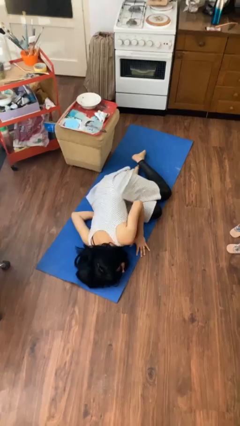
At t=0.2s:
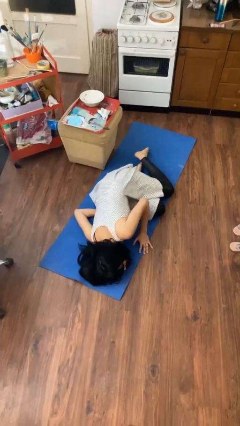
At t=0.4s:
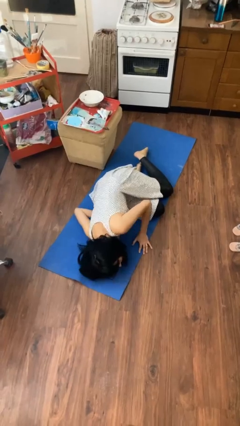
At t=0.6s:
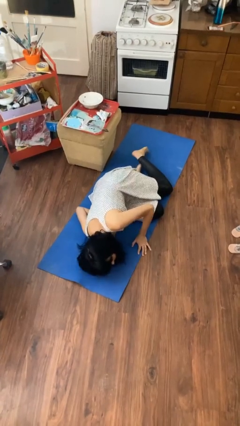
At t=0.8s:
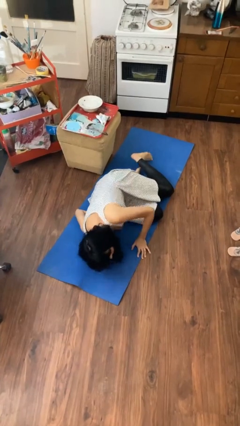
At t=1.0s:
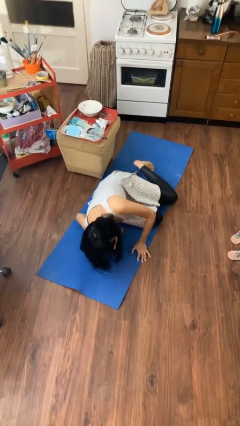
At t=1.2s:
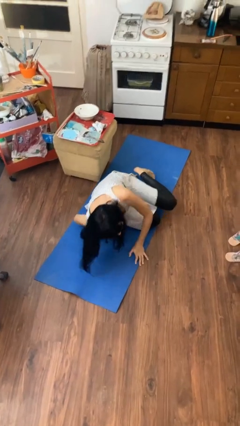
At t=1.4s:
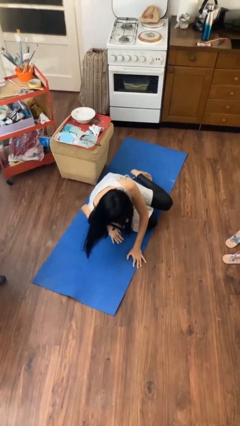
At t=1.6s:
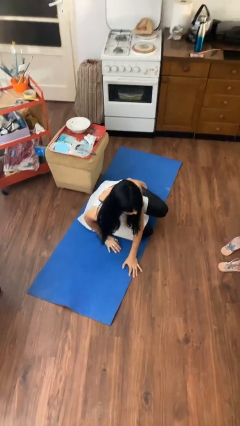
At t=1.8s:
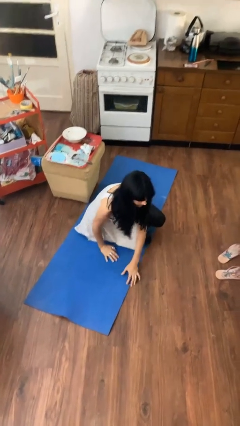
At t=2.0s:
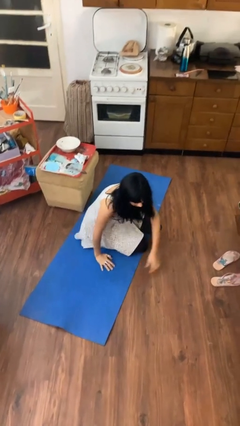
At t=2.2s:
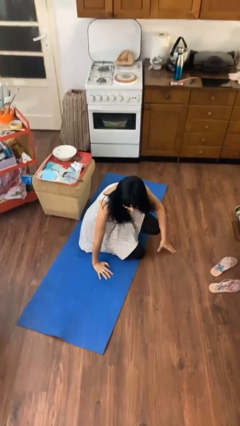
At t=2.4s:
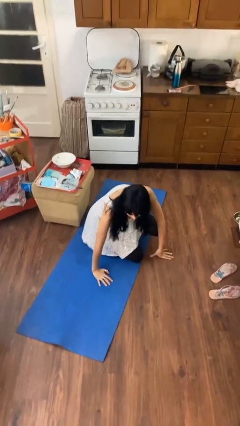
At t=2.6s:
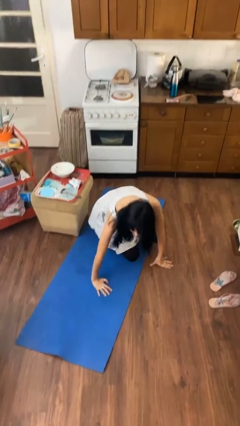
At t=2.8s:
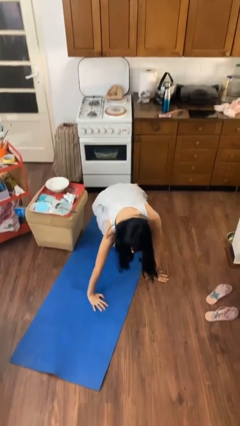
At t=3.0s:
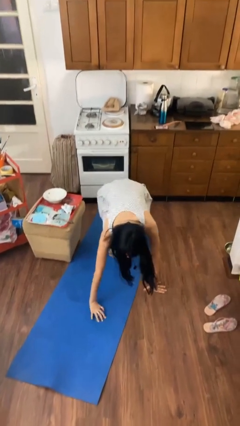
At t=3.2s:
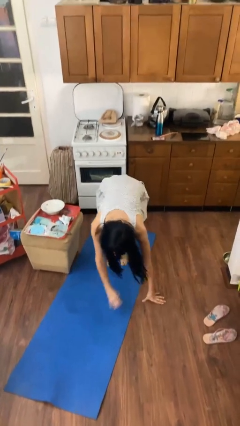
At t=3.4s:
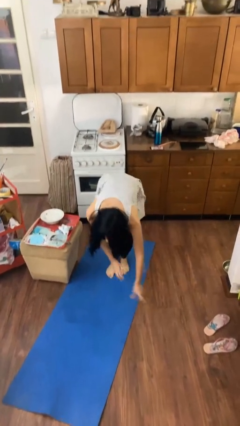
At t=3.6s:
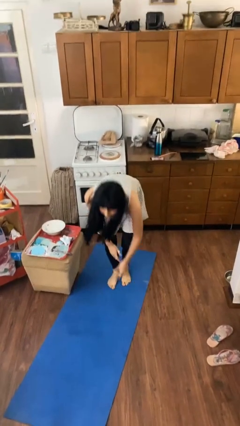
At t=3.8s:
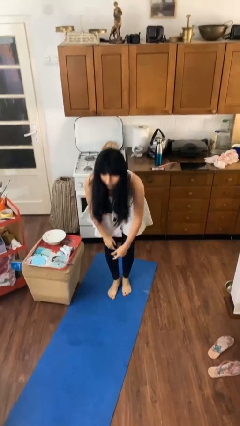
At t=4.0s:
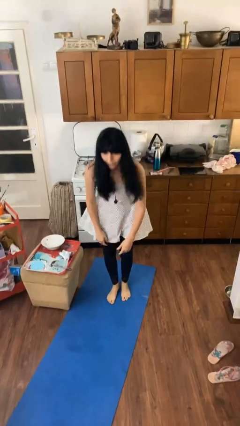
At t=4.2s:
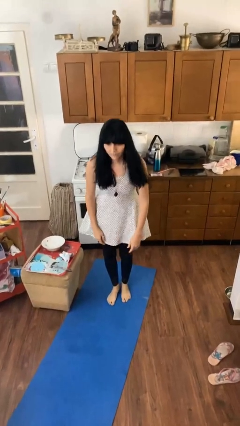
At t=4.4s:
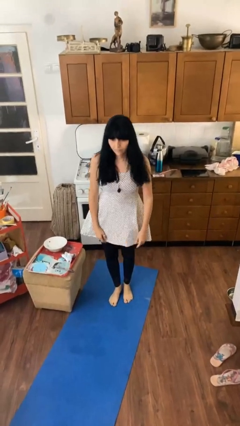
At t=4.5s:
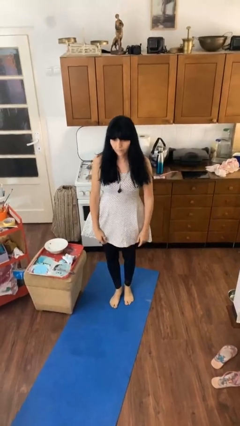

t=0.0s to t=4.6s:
person stands up from floor

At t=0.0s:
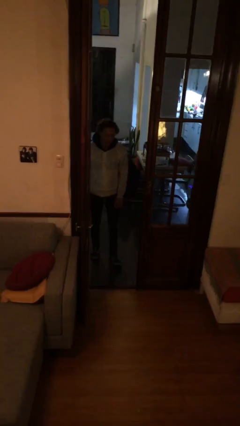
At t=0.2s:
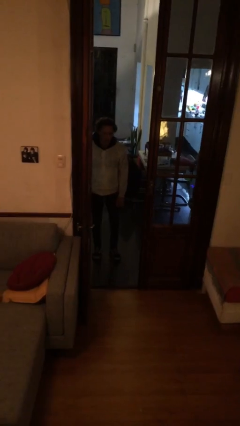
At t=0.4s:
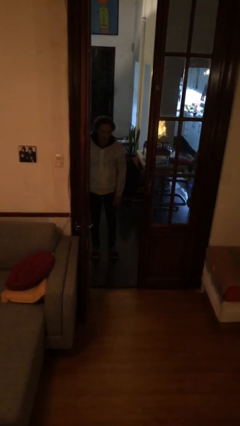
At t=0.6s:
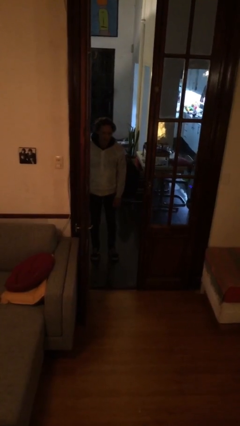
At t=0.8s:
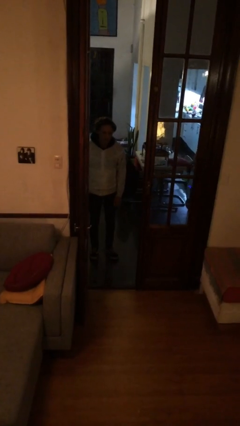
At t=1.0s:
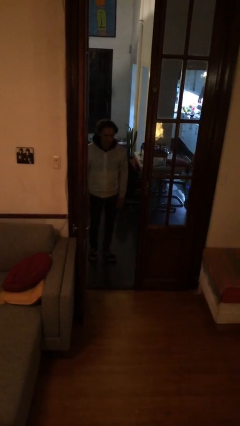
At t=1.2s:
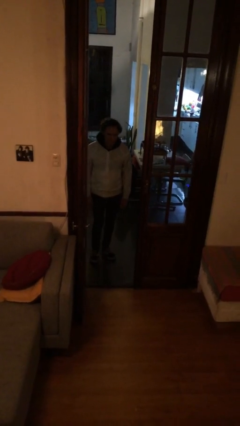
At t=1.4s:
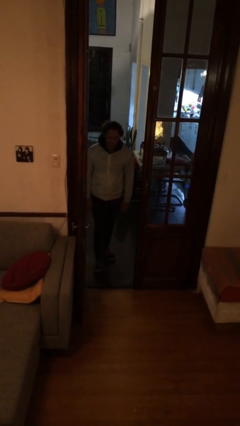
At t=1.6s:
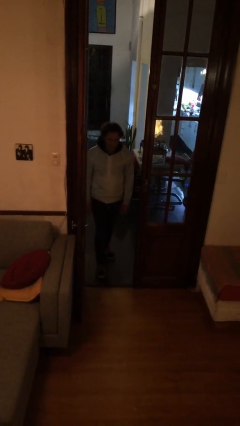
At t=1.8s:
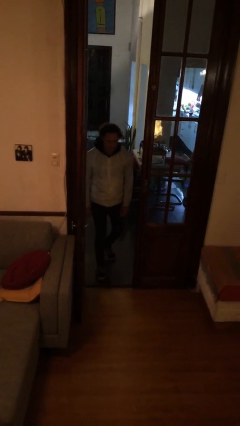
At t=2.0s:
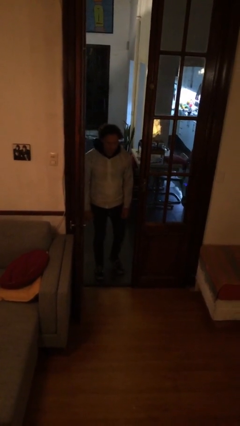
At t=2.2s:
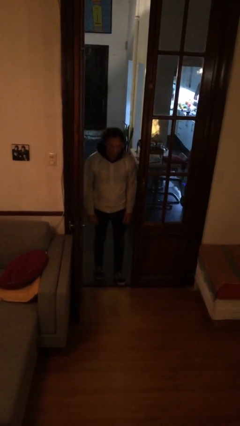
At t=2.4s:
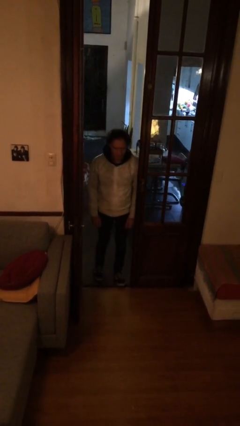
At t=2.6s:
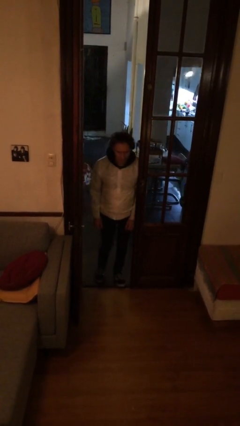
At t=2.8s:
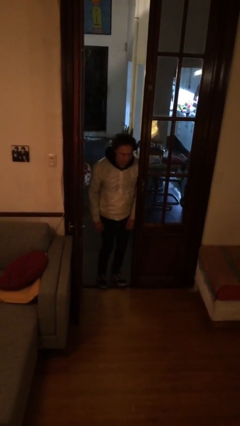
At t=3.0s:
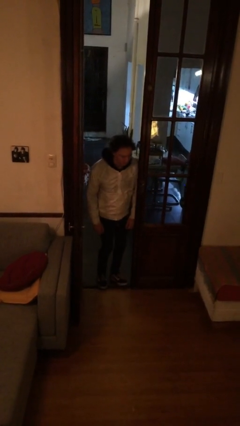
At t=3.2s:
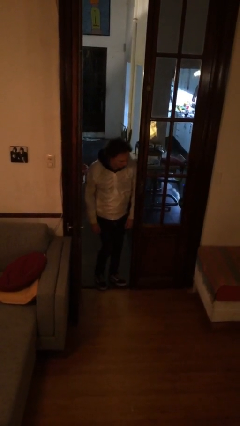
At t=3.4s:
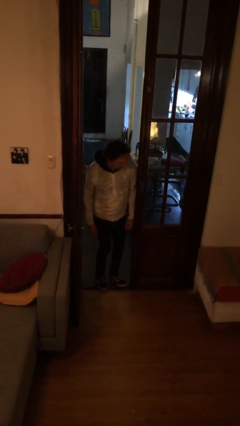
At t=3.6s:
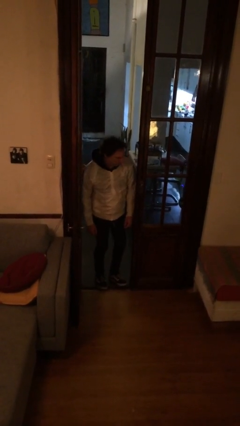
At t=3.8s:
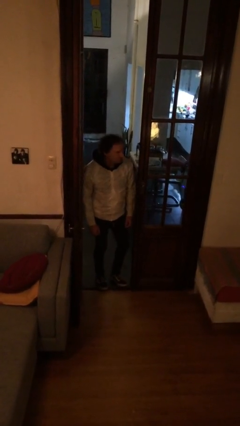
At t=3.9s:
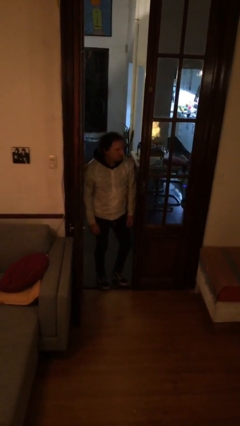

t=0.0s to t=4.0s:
person bumps into wall

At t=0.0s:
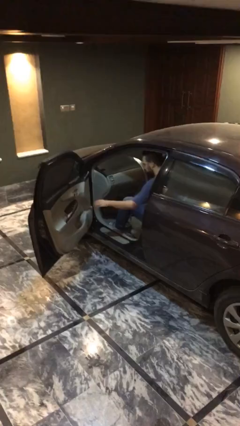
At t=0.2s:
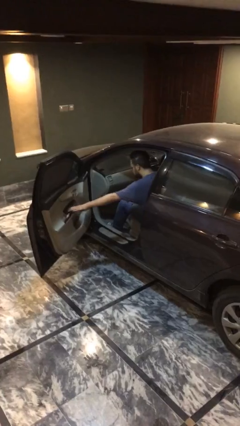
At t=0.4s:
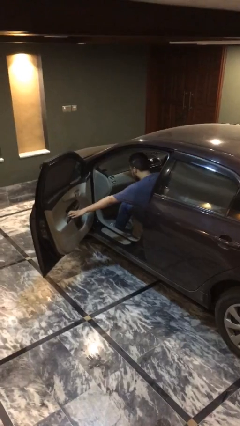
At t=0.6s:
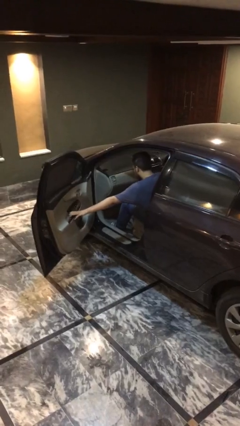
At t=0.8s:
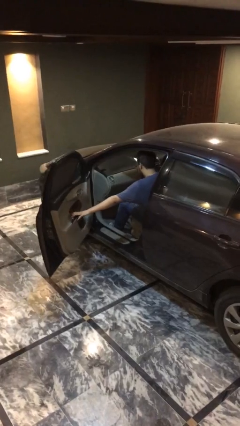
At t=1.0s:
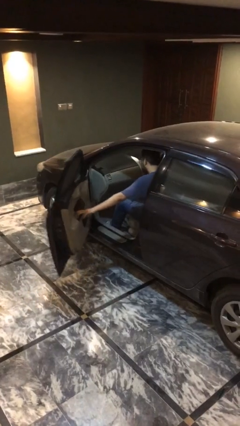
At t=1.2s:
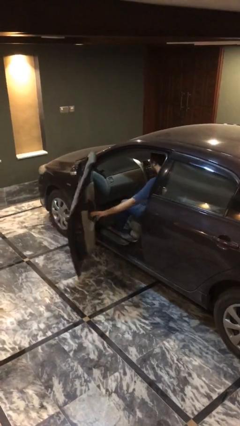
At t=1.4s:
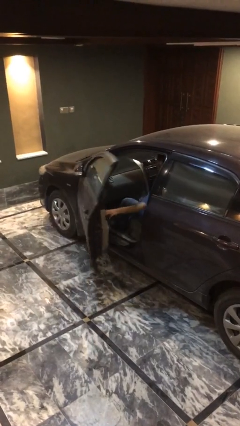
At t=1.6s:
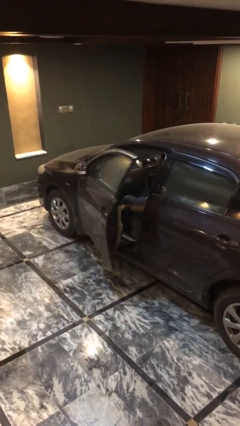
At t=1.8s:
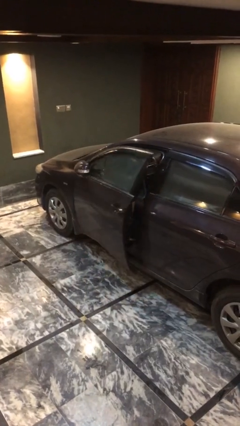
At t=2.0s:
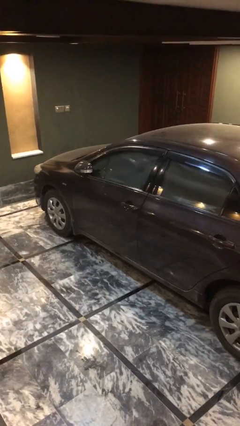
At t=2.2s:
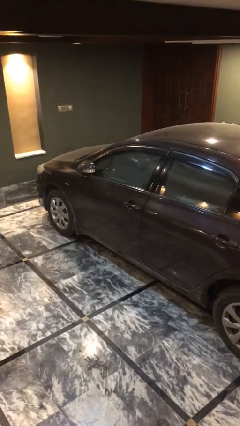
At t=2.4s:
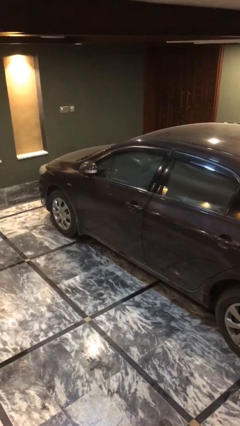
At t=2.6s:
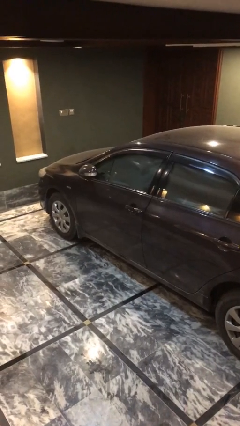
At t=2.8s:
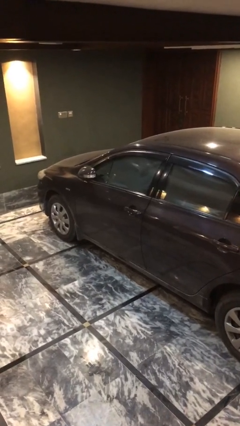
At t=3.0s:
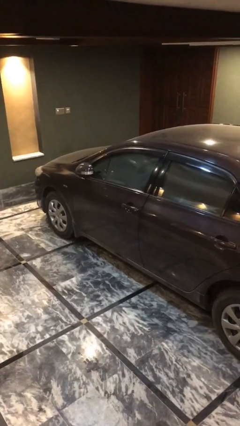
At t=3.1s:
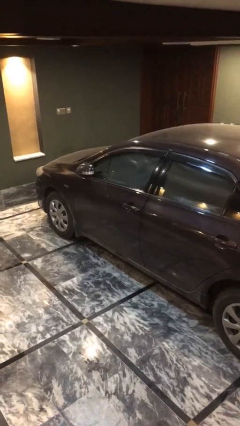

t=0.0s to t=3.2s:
person closes car door

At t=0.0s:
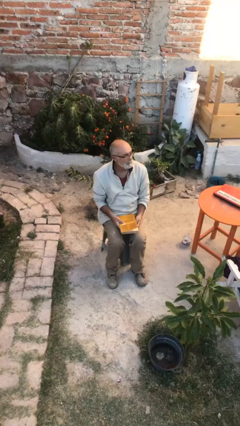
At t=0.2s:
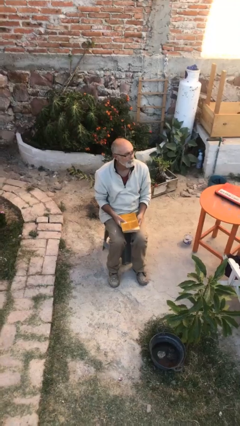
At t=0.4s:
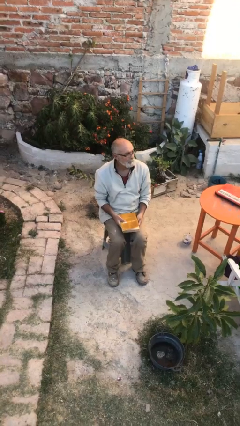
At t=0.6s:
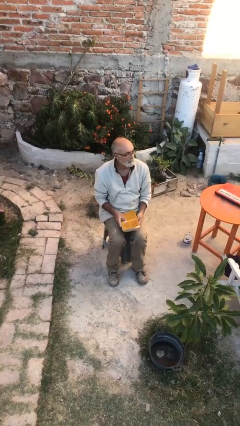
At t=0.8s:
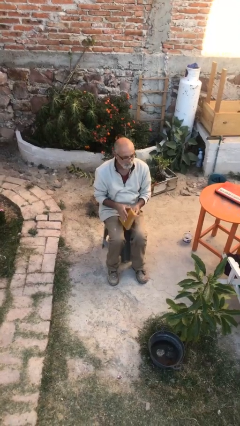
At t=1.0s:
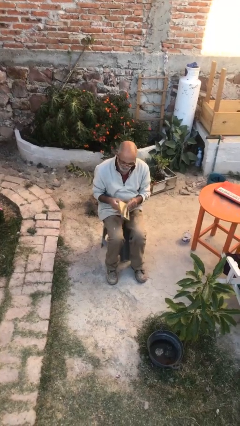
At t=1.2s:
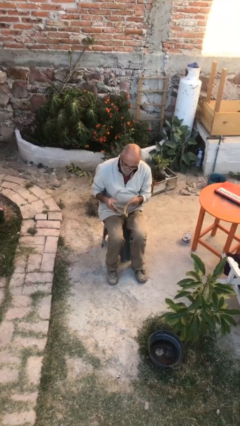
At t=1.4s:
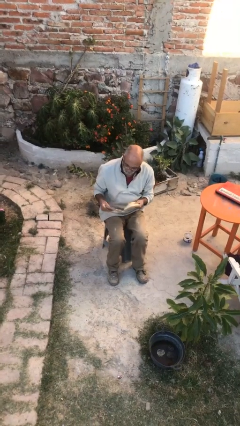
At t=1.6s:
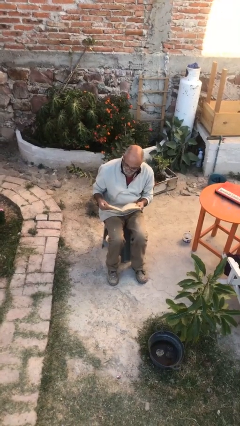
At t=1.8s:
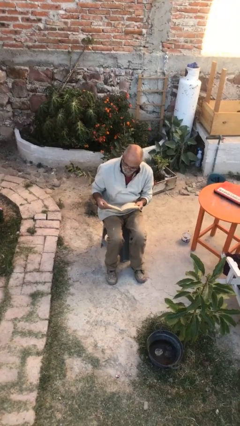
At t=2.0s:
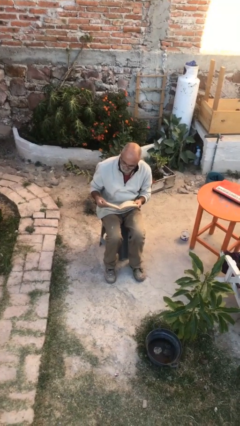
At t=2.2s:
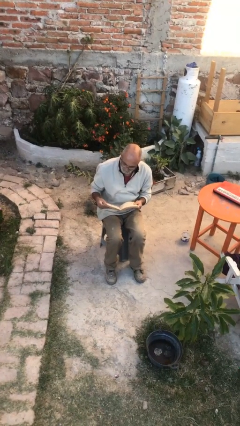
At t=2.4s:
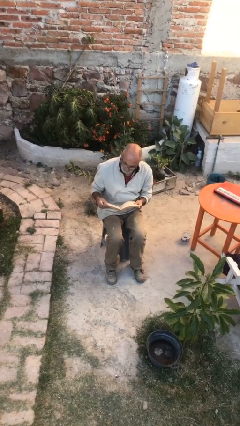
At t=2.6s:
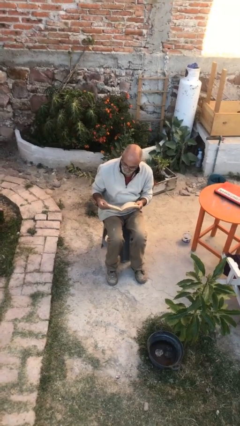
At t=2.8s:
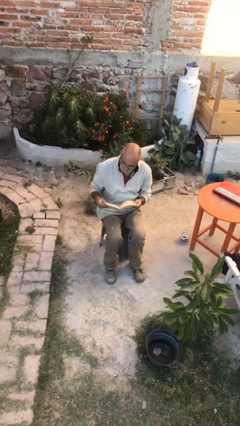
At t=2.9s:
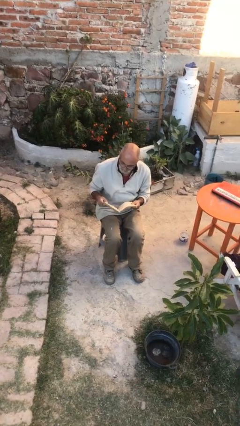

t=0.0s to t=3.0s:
person reads document

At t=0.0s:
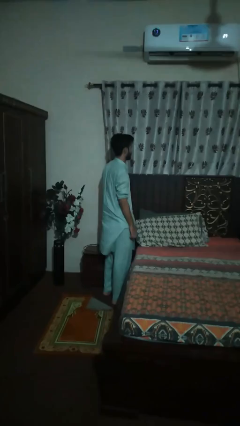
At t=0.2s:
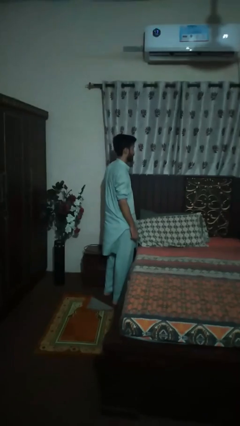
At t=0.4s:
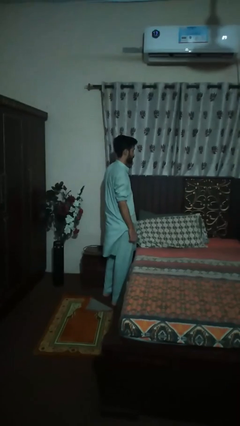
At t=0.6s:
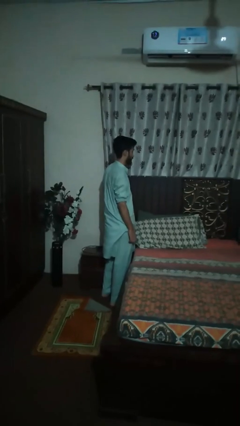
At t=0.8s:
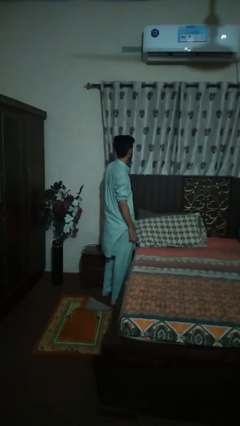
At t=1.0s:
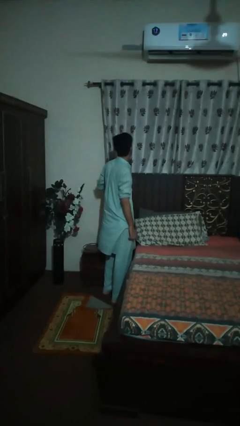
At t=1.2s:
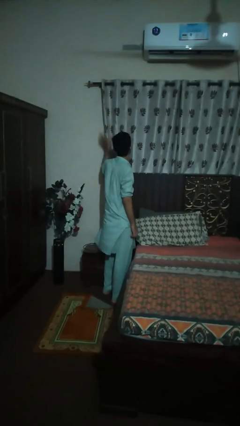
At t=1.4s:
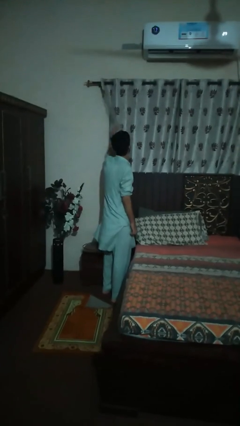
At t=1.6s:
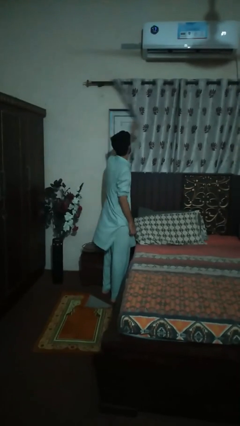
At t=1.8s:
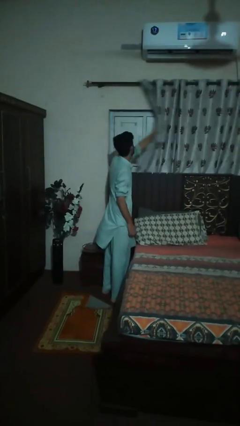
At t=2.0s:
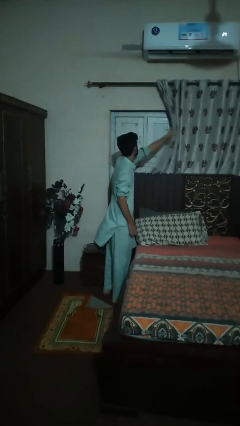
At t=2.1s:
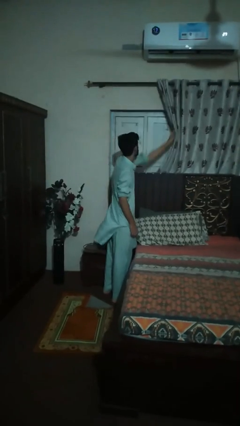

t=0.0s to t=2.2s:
person opens curtains
